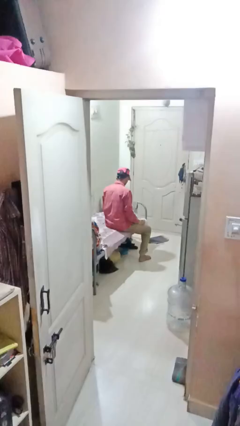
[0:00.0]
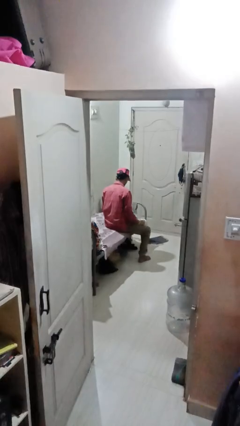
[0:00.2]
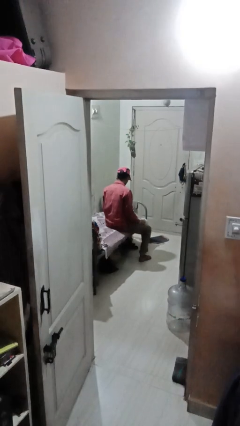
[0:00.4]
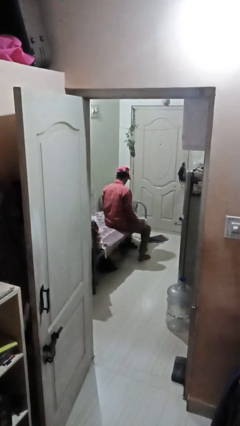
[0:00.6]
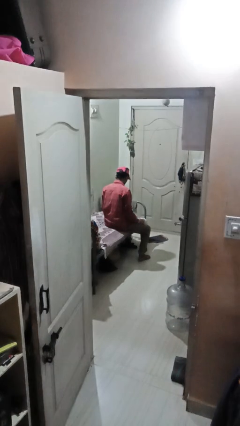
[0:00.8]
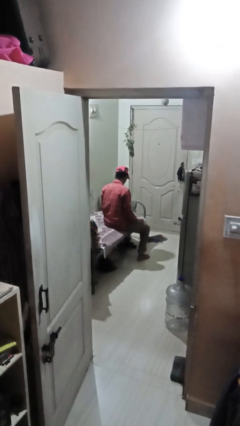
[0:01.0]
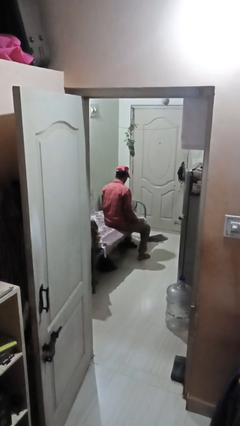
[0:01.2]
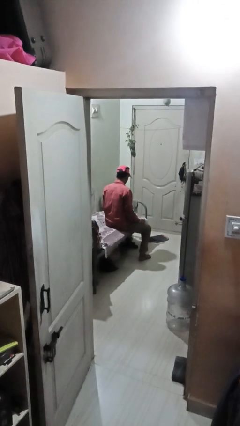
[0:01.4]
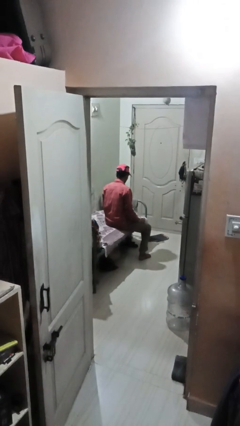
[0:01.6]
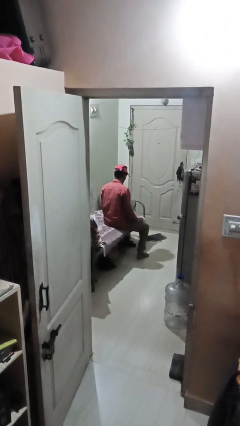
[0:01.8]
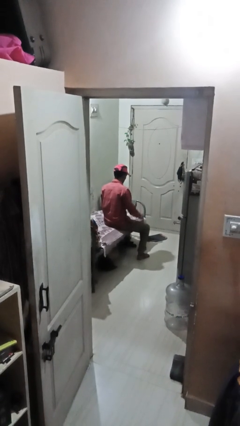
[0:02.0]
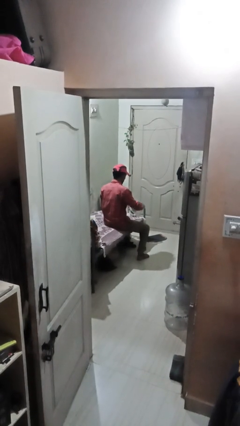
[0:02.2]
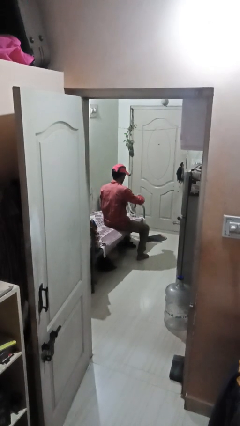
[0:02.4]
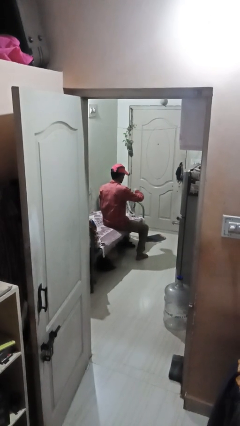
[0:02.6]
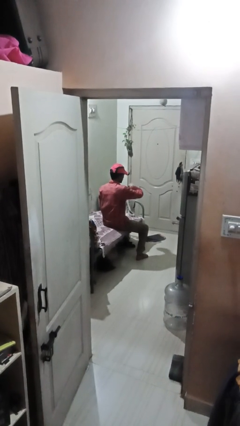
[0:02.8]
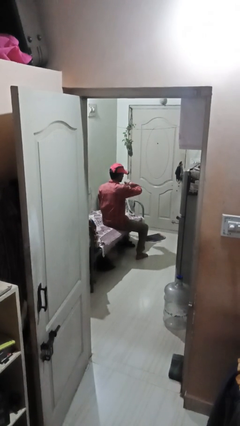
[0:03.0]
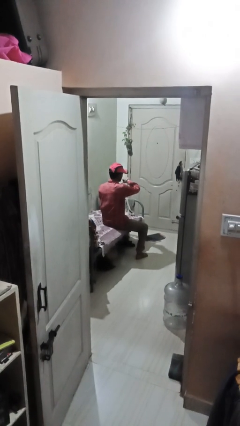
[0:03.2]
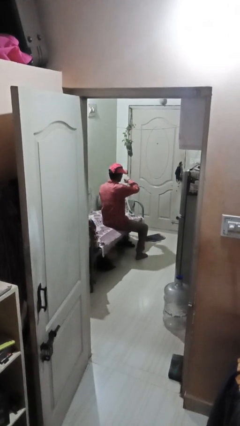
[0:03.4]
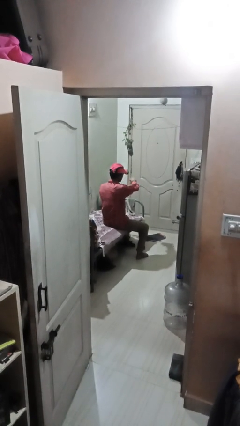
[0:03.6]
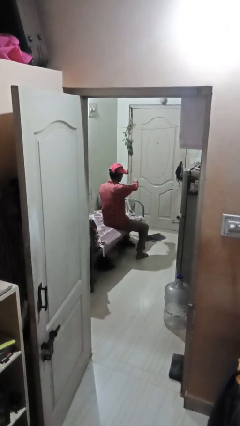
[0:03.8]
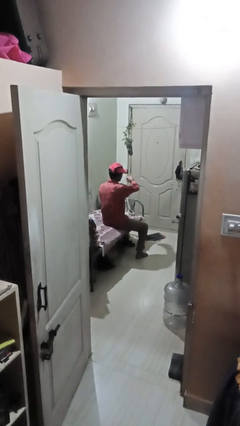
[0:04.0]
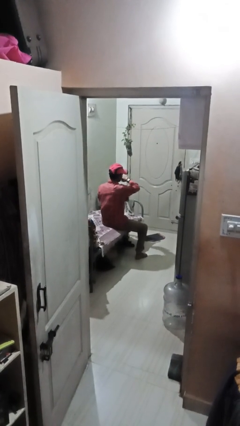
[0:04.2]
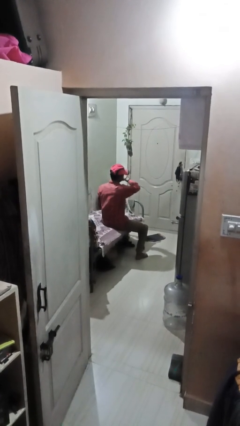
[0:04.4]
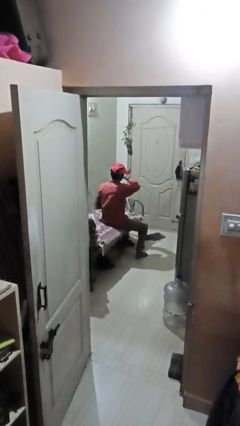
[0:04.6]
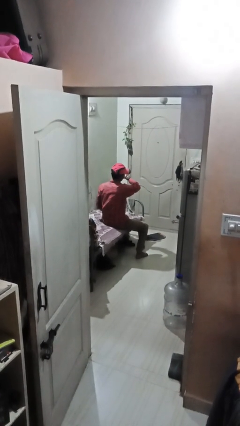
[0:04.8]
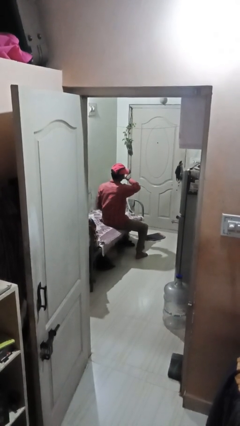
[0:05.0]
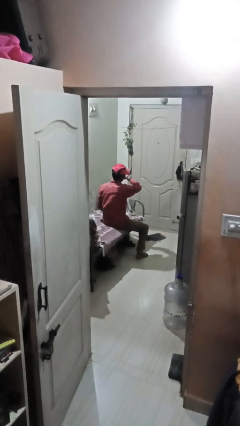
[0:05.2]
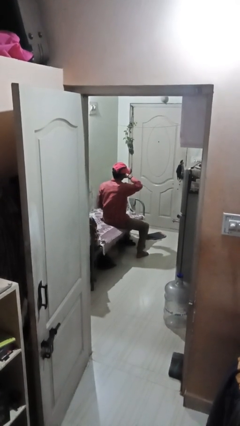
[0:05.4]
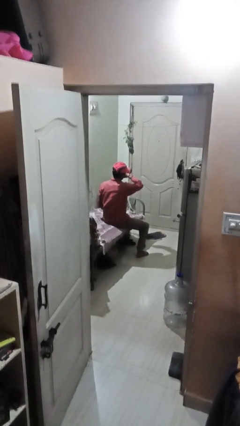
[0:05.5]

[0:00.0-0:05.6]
person looks at wristwatch

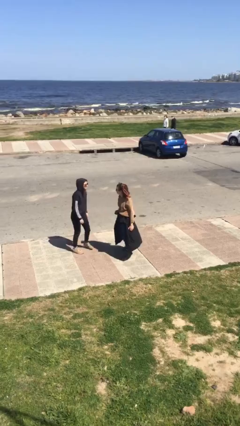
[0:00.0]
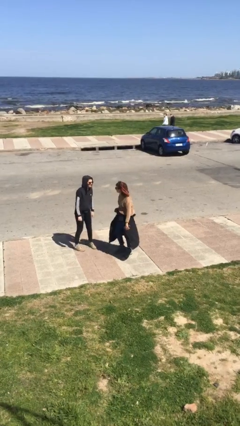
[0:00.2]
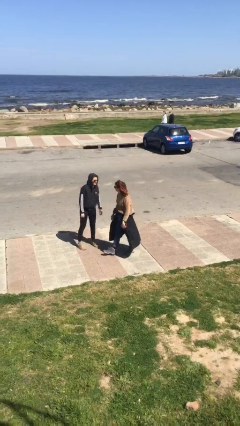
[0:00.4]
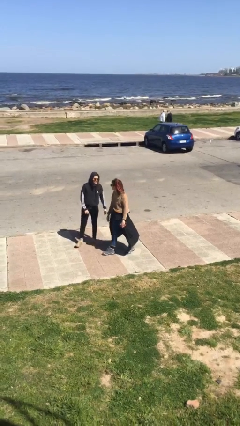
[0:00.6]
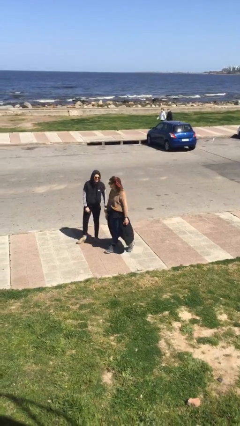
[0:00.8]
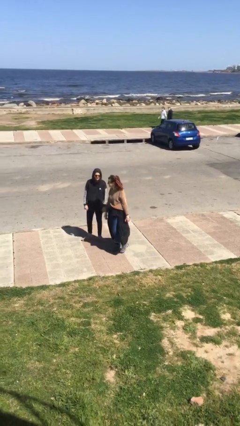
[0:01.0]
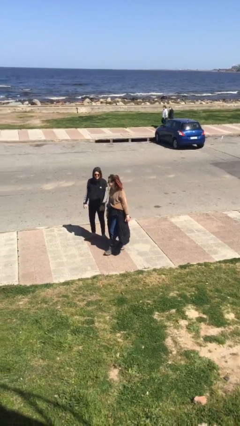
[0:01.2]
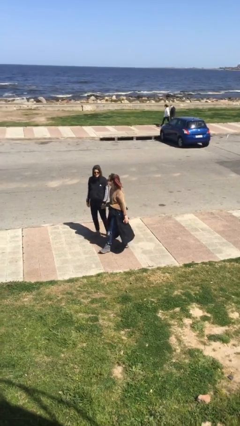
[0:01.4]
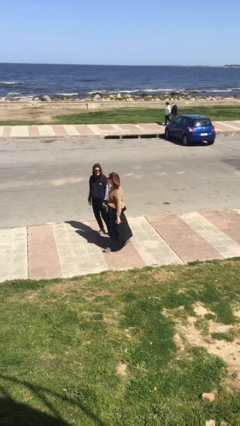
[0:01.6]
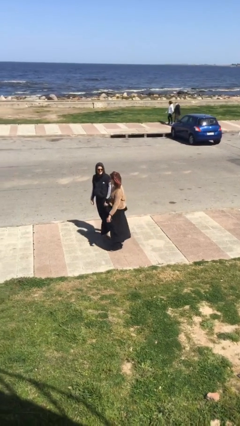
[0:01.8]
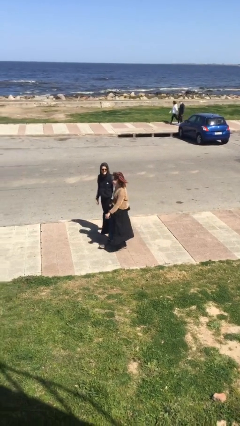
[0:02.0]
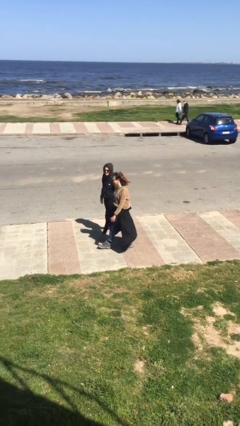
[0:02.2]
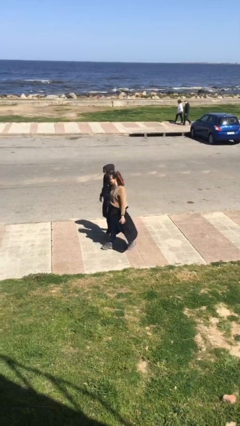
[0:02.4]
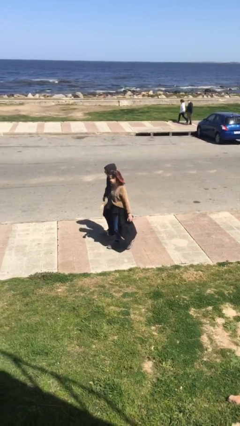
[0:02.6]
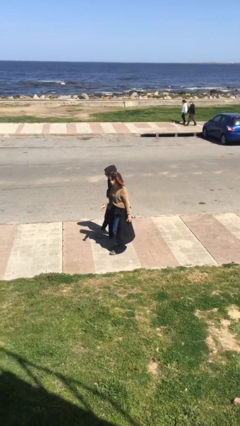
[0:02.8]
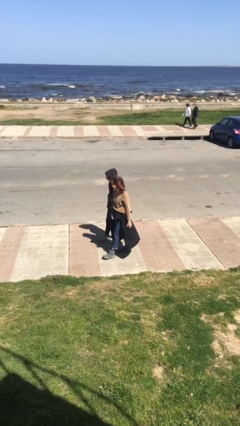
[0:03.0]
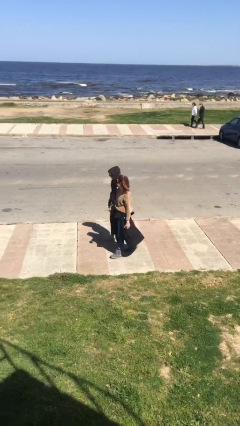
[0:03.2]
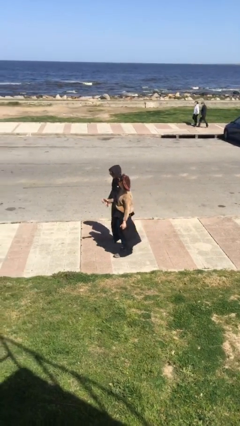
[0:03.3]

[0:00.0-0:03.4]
person talks to person

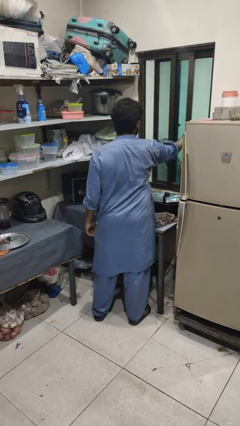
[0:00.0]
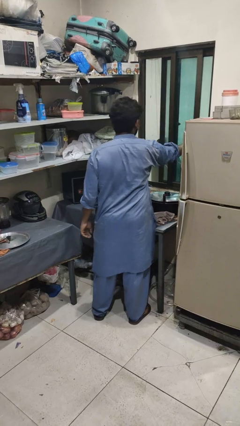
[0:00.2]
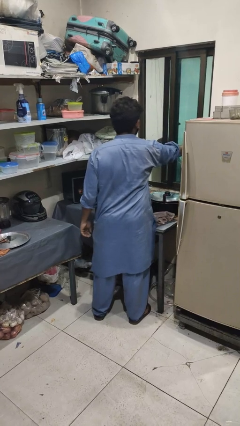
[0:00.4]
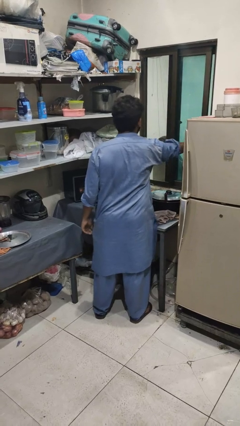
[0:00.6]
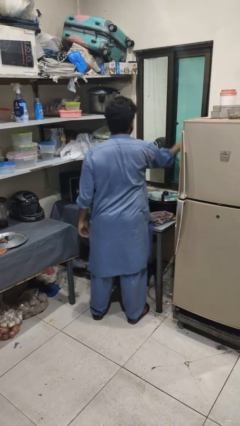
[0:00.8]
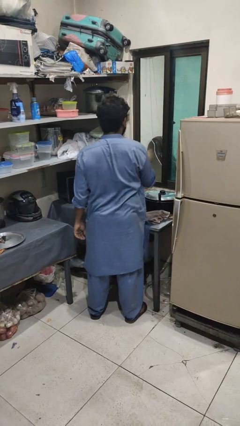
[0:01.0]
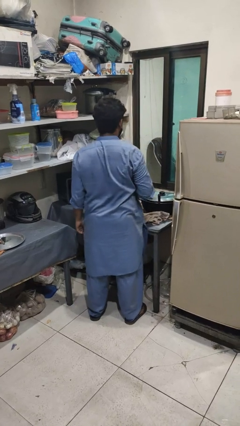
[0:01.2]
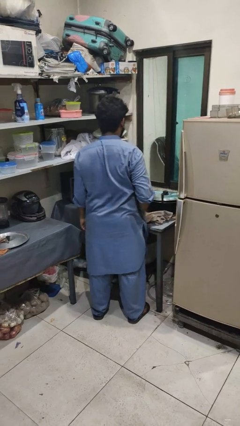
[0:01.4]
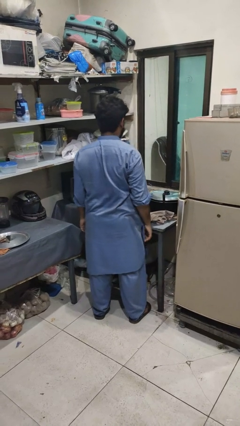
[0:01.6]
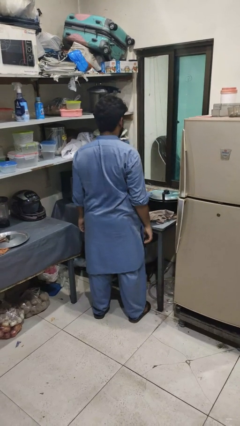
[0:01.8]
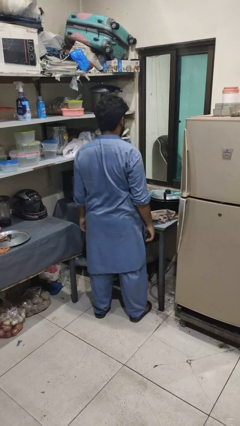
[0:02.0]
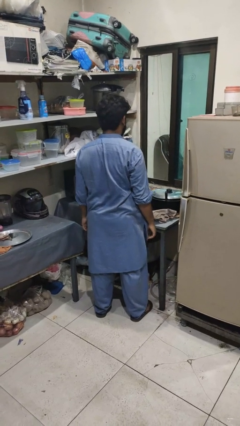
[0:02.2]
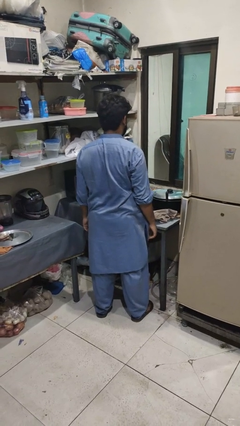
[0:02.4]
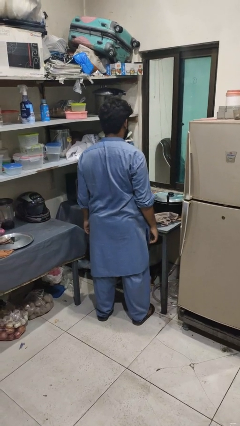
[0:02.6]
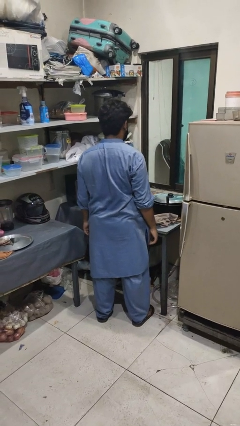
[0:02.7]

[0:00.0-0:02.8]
person opens home window

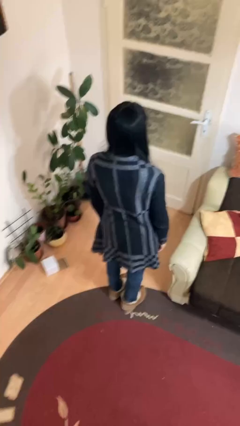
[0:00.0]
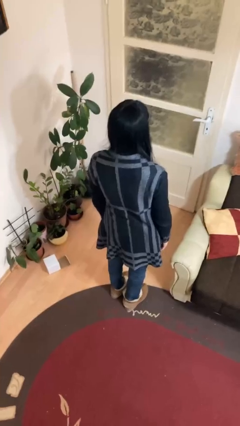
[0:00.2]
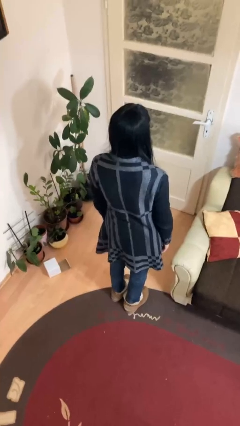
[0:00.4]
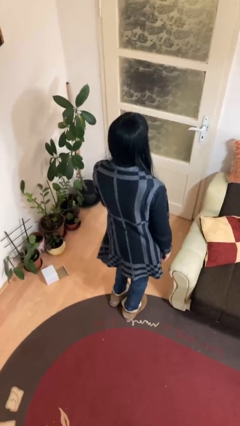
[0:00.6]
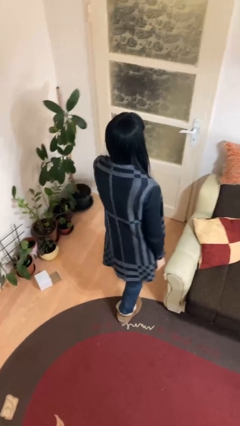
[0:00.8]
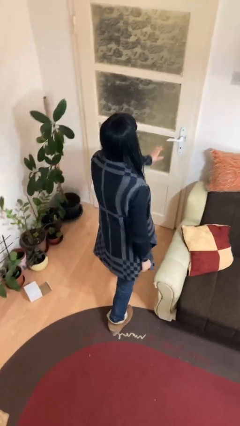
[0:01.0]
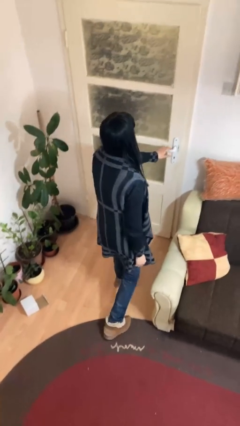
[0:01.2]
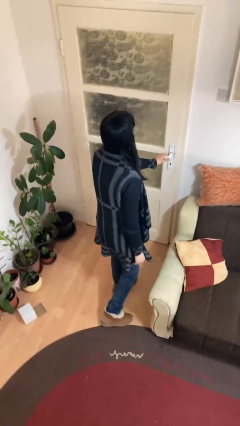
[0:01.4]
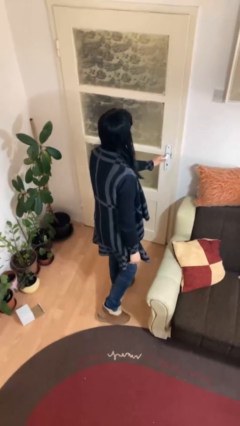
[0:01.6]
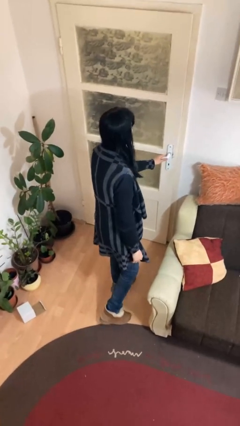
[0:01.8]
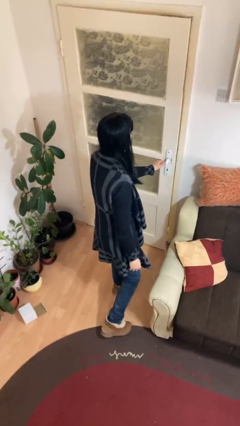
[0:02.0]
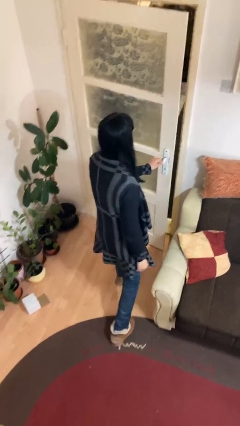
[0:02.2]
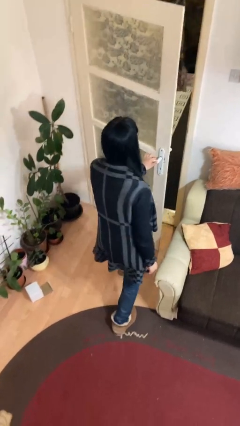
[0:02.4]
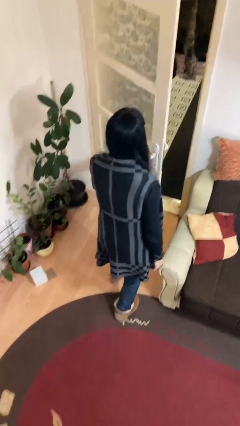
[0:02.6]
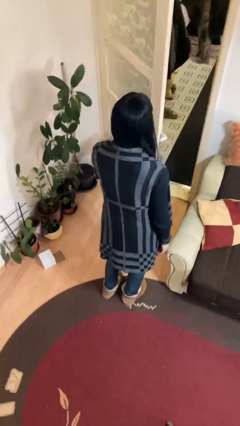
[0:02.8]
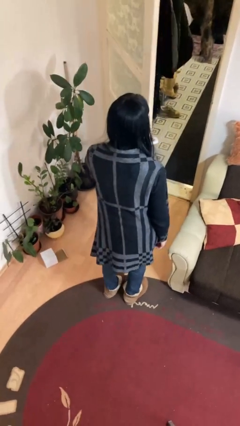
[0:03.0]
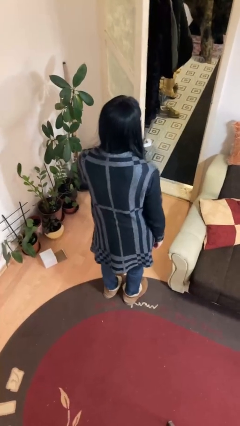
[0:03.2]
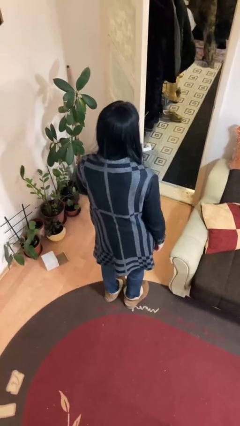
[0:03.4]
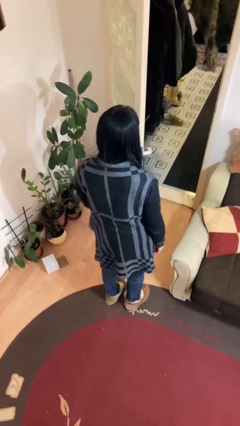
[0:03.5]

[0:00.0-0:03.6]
person opens facility door

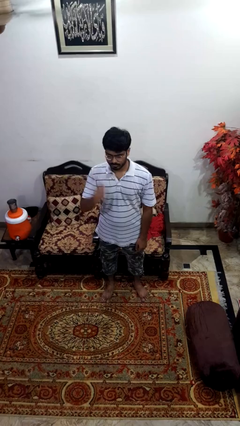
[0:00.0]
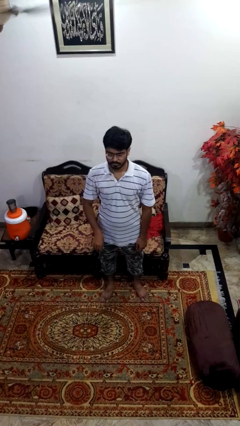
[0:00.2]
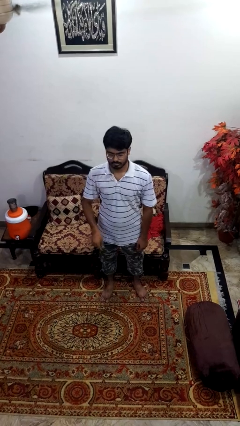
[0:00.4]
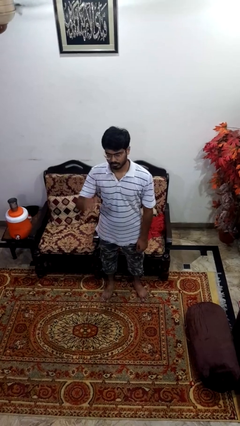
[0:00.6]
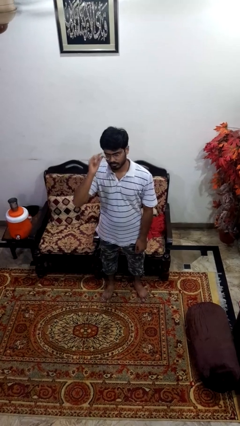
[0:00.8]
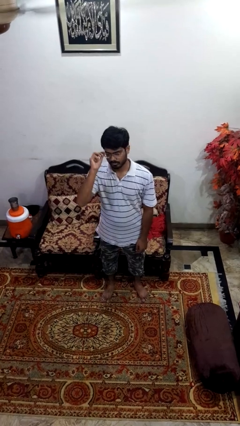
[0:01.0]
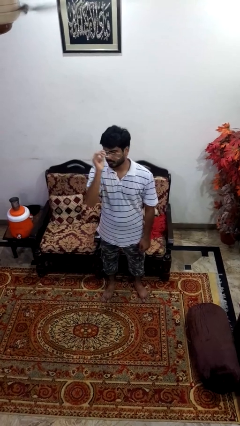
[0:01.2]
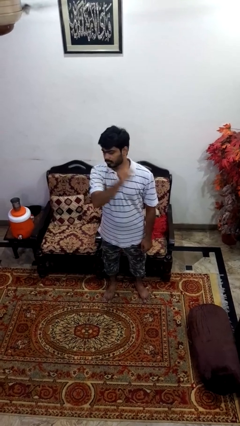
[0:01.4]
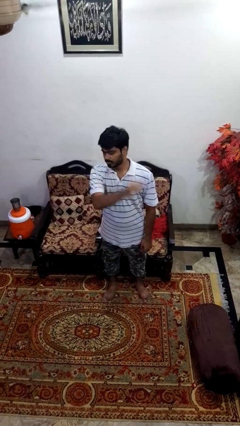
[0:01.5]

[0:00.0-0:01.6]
person takes off glasses

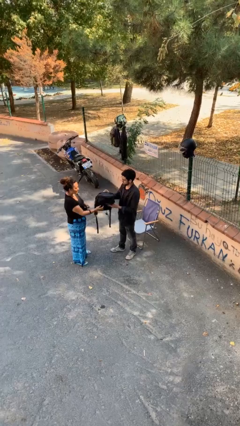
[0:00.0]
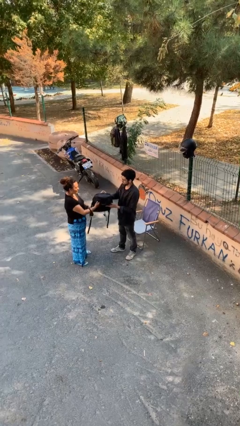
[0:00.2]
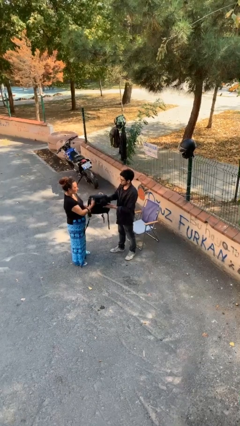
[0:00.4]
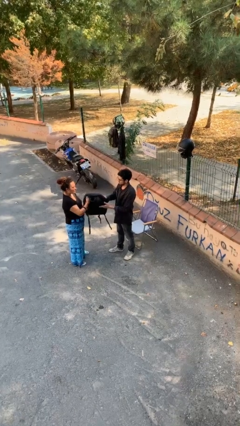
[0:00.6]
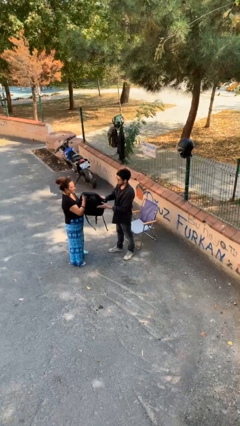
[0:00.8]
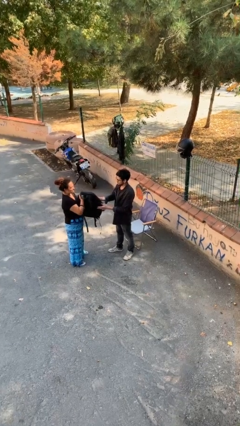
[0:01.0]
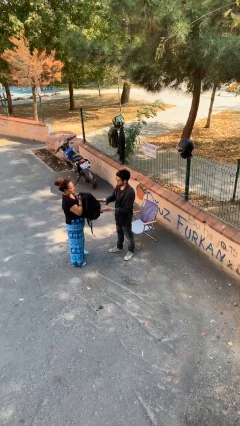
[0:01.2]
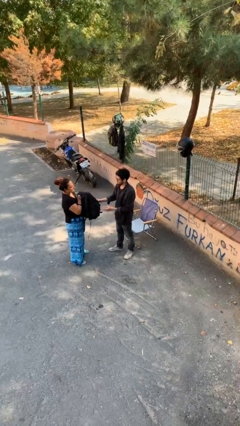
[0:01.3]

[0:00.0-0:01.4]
person transfers object to person
